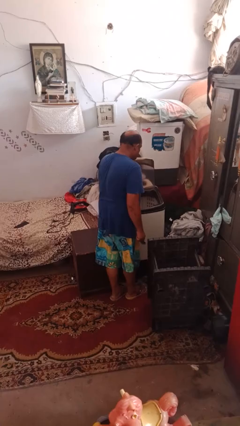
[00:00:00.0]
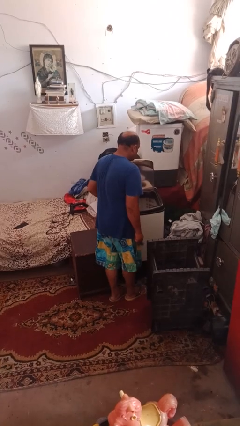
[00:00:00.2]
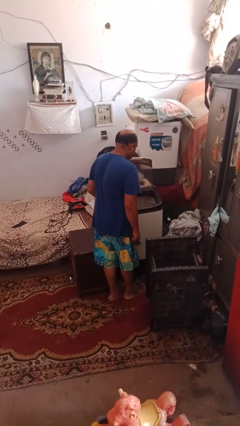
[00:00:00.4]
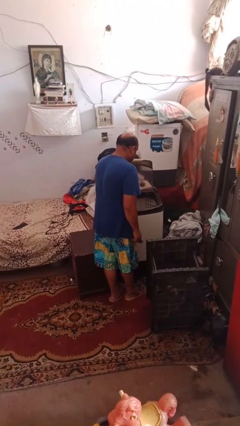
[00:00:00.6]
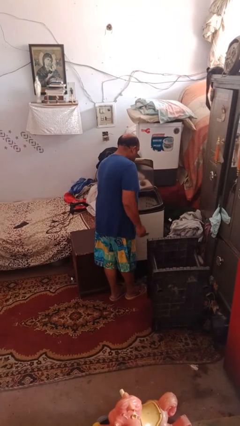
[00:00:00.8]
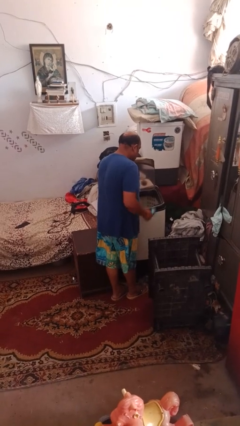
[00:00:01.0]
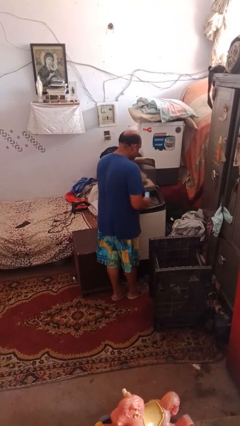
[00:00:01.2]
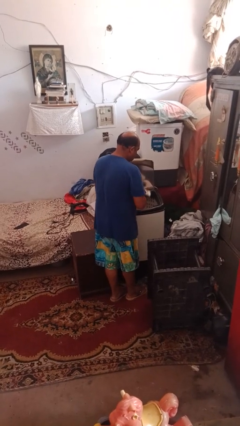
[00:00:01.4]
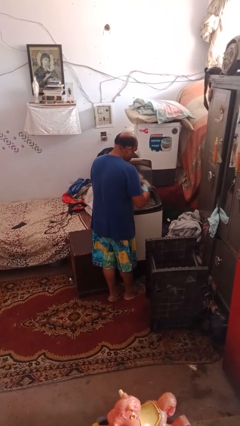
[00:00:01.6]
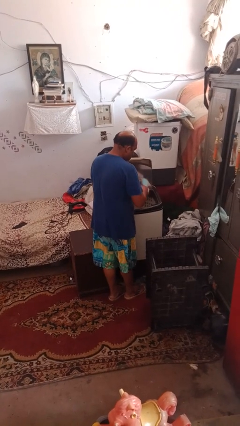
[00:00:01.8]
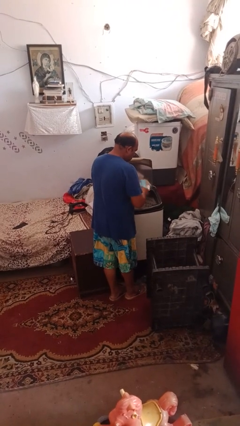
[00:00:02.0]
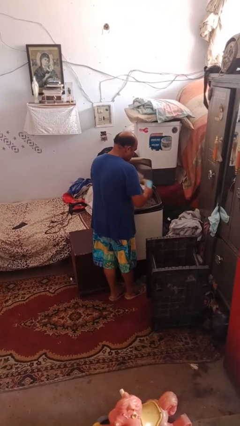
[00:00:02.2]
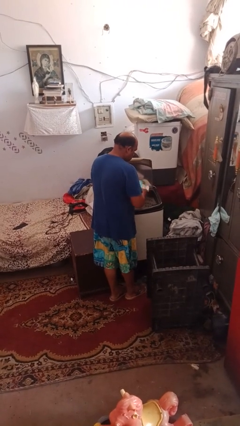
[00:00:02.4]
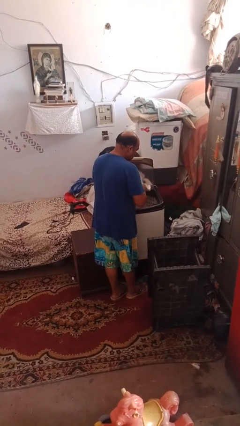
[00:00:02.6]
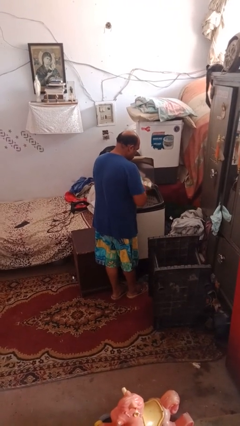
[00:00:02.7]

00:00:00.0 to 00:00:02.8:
person cleans dryer lint trap

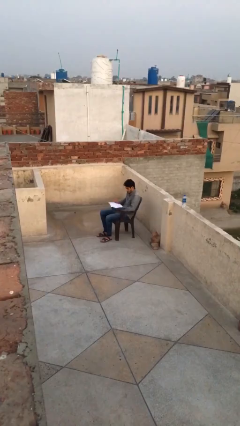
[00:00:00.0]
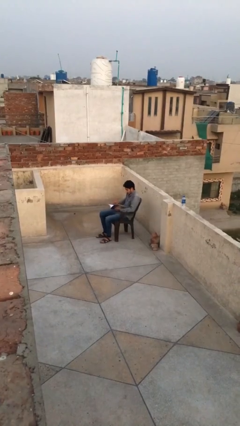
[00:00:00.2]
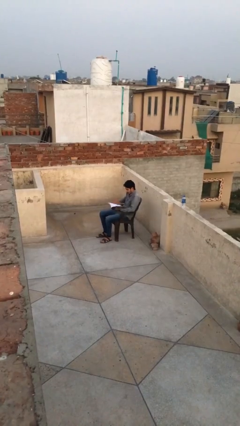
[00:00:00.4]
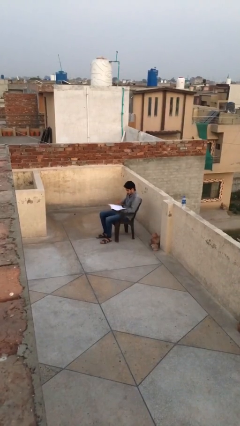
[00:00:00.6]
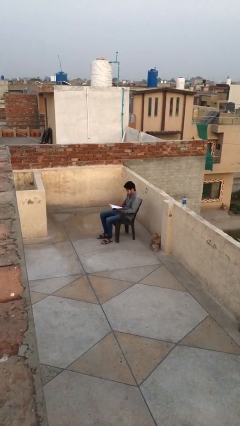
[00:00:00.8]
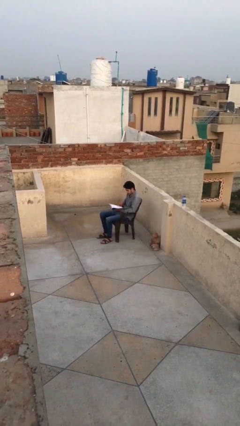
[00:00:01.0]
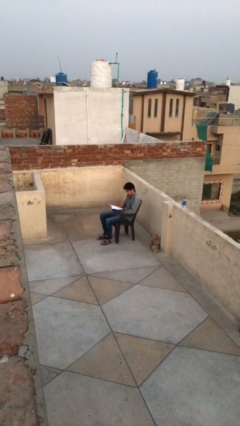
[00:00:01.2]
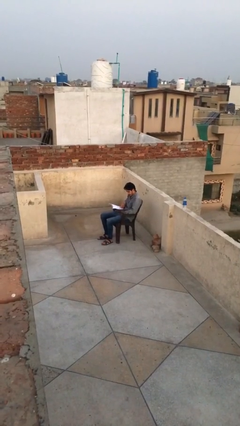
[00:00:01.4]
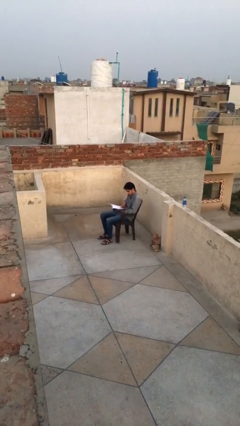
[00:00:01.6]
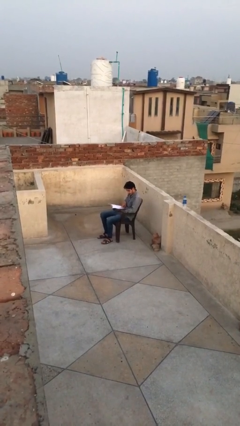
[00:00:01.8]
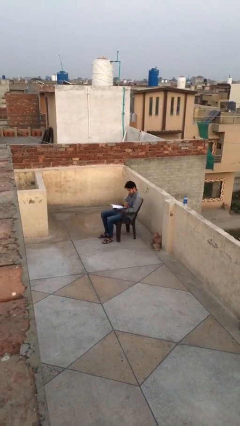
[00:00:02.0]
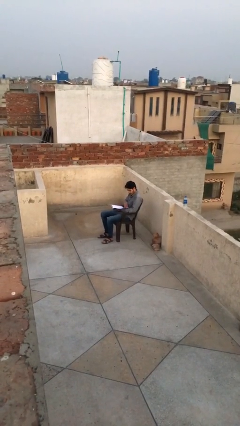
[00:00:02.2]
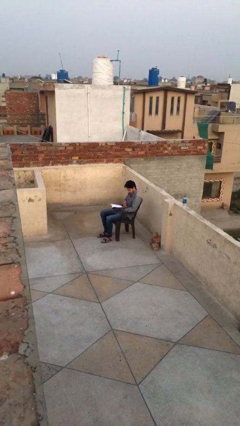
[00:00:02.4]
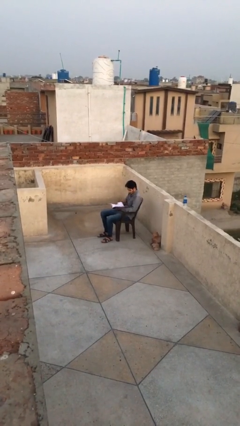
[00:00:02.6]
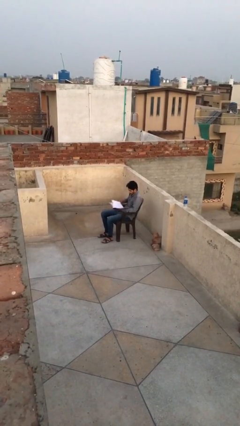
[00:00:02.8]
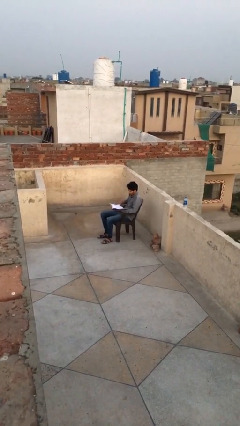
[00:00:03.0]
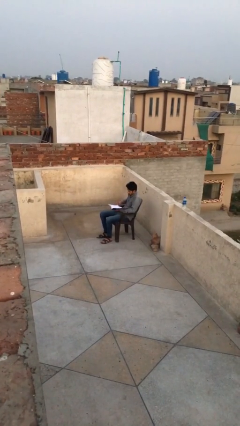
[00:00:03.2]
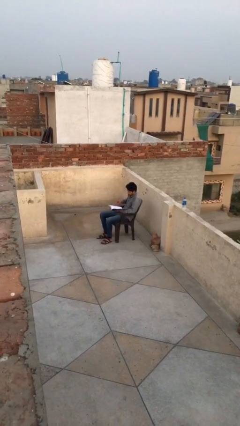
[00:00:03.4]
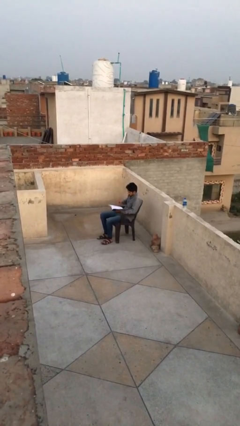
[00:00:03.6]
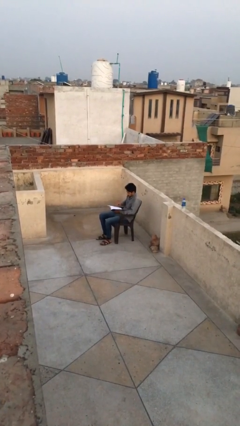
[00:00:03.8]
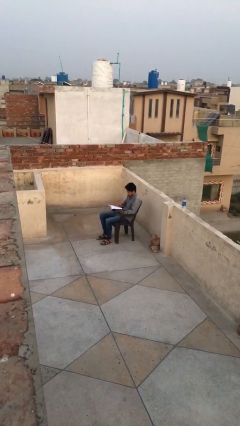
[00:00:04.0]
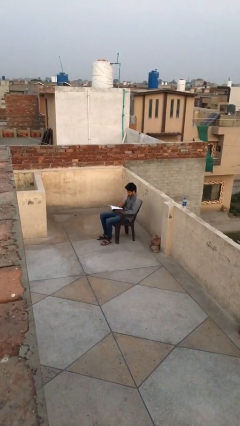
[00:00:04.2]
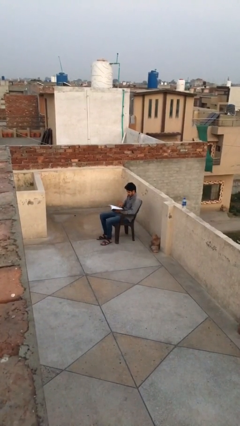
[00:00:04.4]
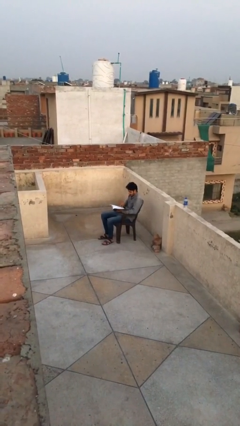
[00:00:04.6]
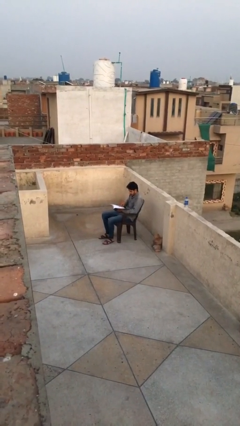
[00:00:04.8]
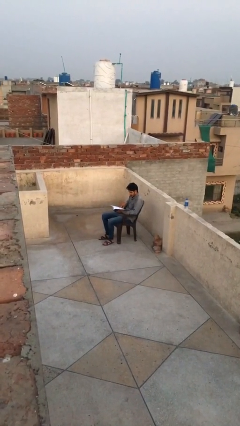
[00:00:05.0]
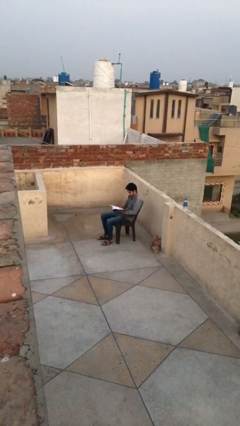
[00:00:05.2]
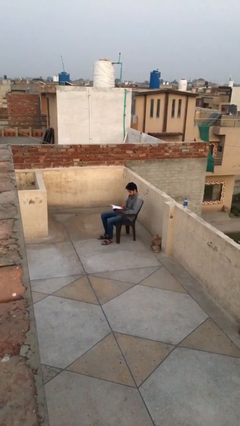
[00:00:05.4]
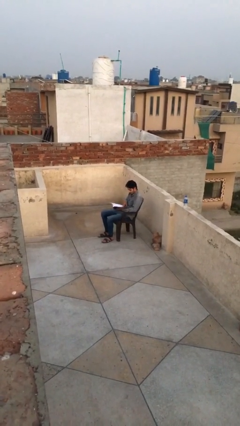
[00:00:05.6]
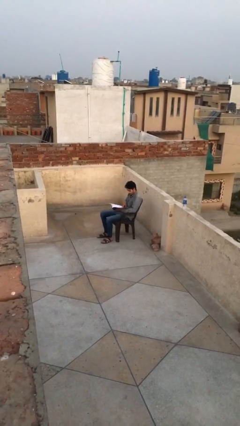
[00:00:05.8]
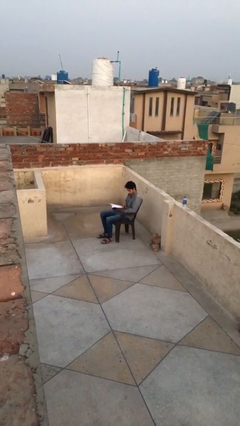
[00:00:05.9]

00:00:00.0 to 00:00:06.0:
person reads document

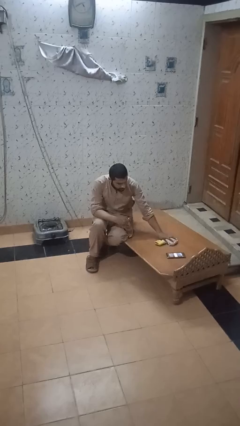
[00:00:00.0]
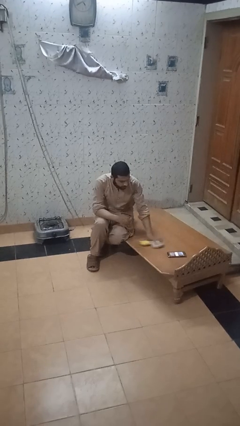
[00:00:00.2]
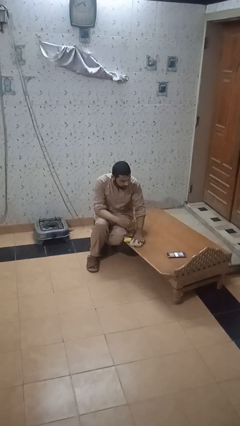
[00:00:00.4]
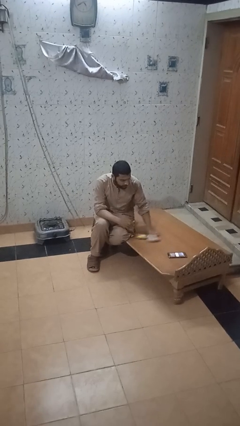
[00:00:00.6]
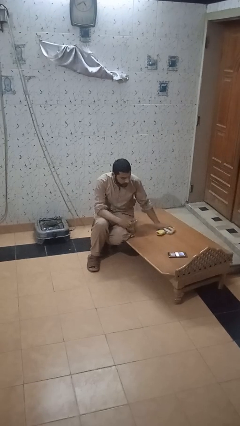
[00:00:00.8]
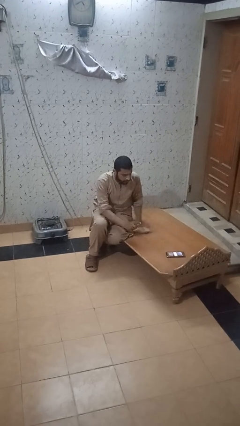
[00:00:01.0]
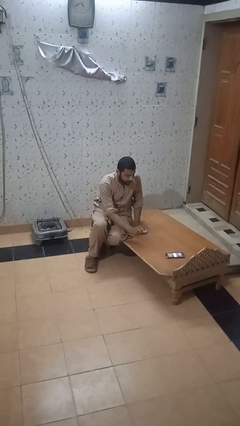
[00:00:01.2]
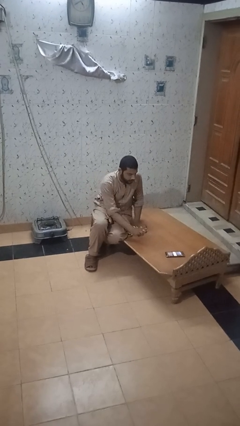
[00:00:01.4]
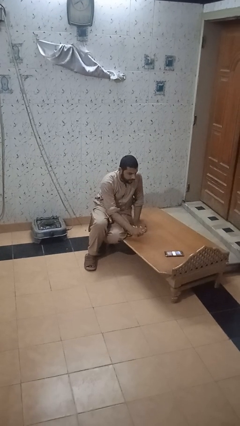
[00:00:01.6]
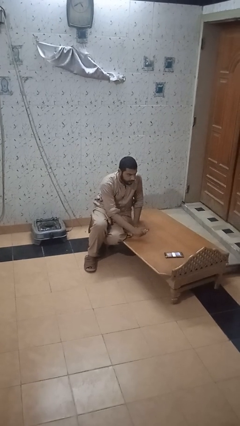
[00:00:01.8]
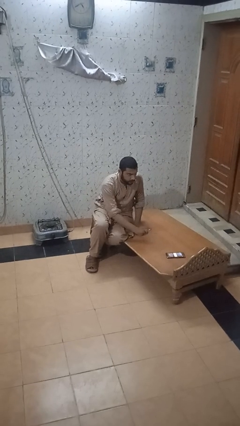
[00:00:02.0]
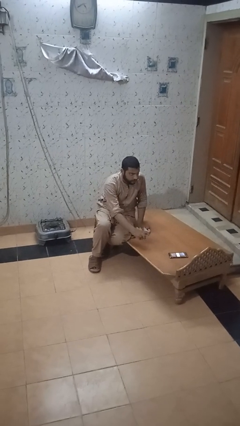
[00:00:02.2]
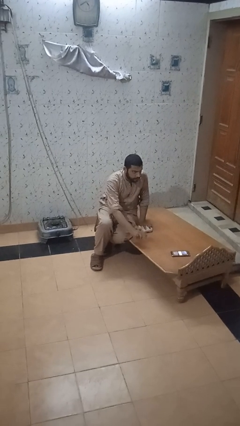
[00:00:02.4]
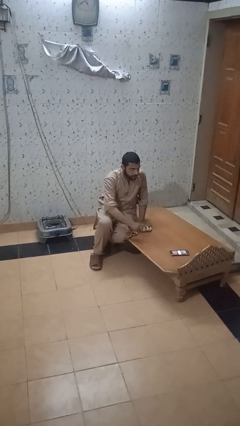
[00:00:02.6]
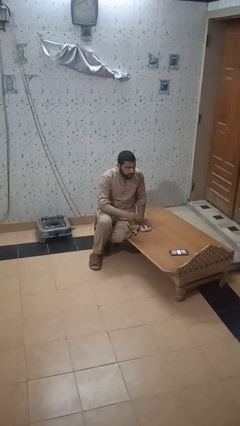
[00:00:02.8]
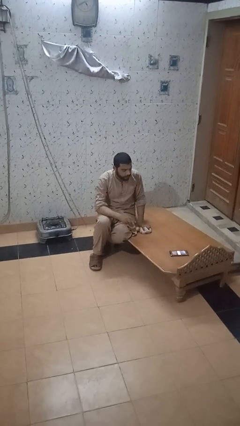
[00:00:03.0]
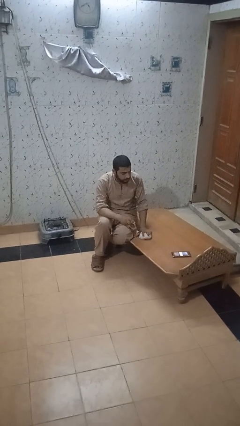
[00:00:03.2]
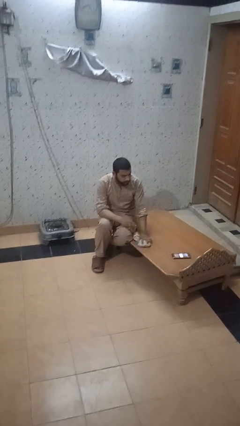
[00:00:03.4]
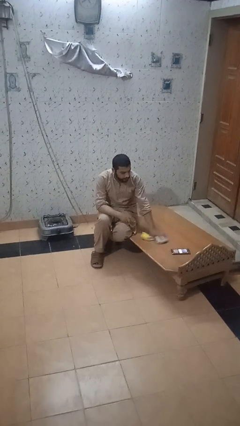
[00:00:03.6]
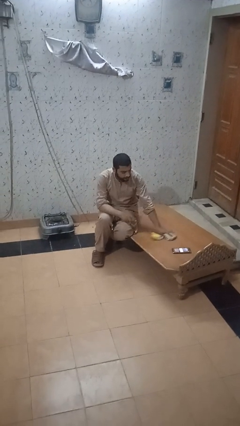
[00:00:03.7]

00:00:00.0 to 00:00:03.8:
person sprays from bottle

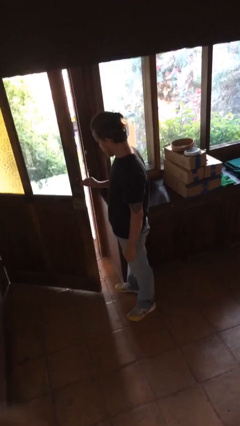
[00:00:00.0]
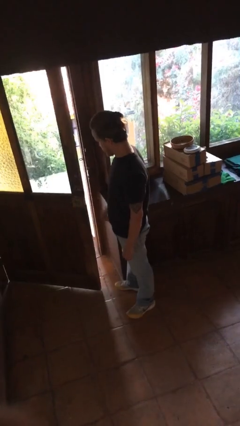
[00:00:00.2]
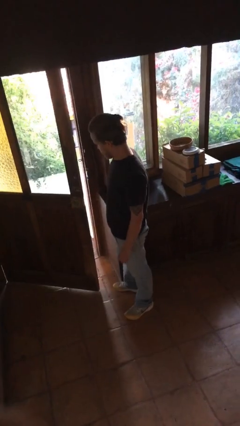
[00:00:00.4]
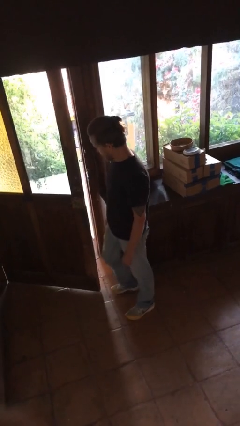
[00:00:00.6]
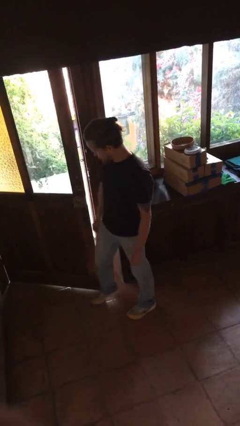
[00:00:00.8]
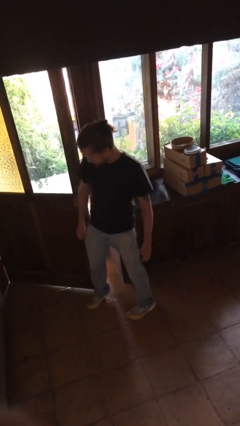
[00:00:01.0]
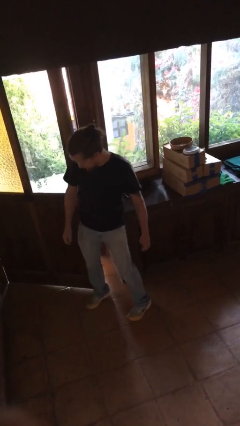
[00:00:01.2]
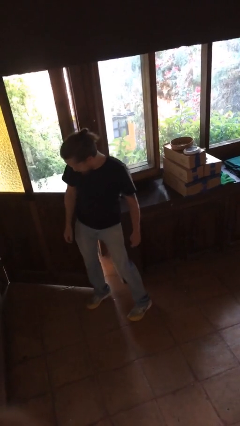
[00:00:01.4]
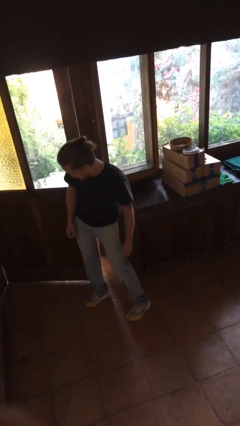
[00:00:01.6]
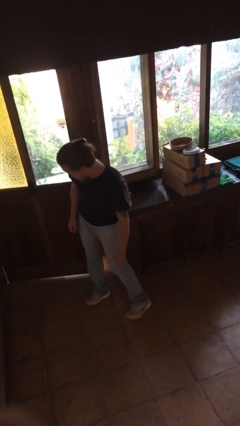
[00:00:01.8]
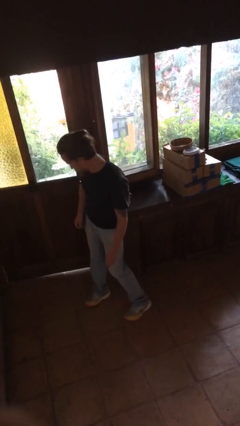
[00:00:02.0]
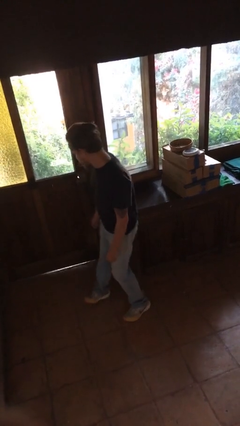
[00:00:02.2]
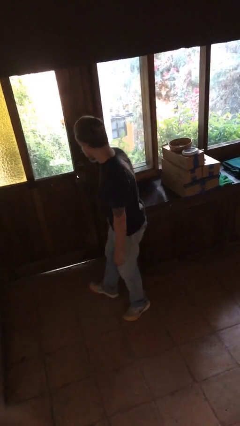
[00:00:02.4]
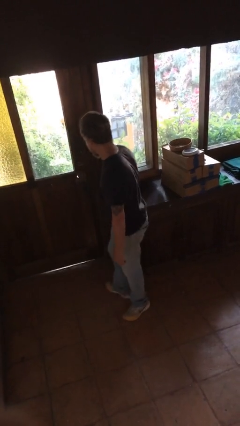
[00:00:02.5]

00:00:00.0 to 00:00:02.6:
person closes door with hip

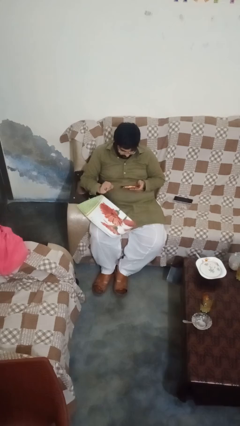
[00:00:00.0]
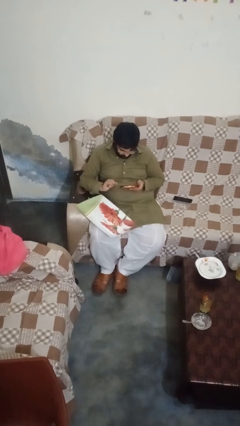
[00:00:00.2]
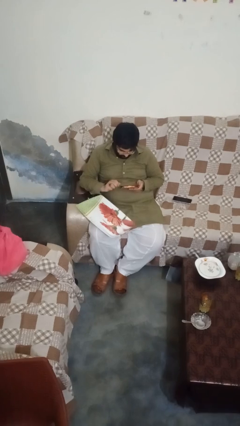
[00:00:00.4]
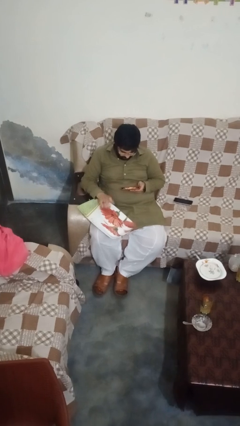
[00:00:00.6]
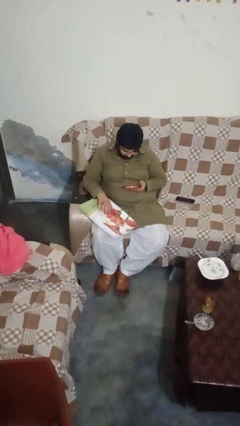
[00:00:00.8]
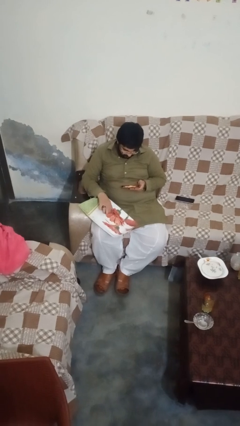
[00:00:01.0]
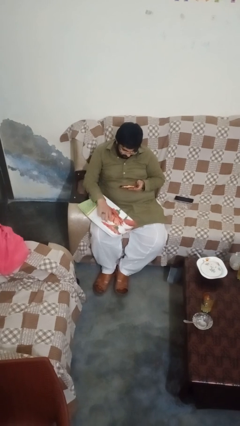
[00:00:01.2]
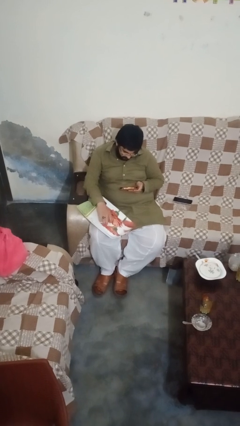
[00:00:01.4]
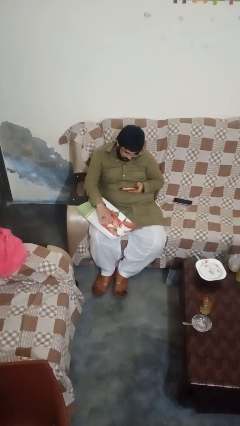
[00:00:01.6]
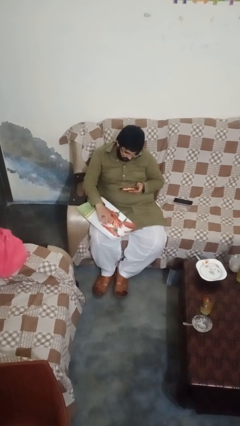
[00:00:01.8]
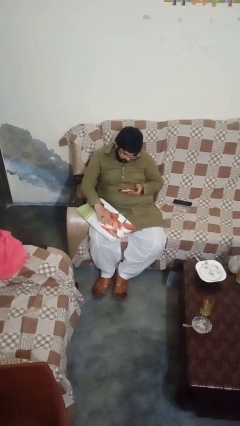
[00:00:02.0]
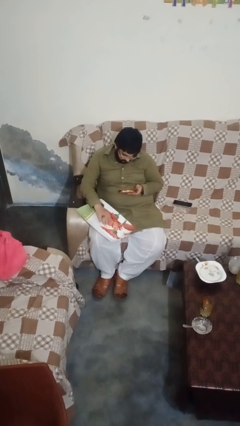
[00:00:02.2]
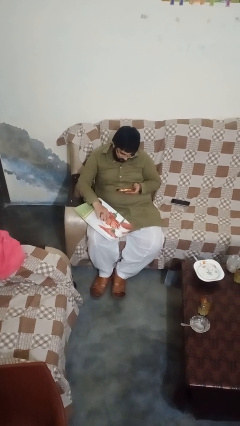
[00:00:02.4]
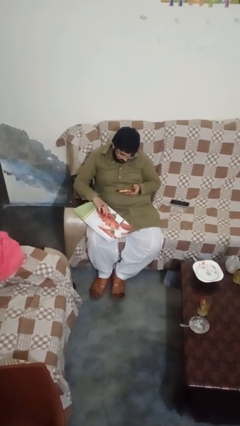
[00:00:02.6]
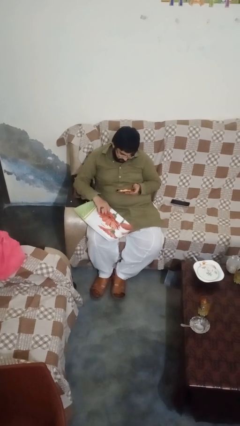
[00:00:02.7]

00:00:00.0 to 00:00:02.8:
person taps object with finger
